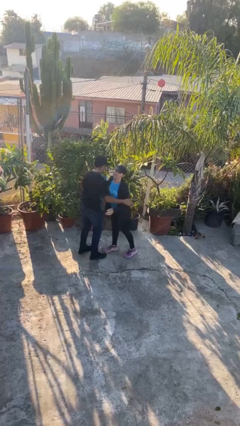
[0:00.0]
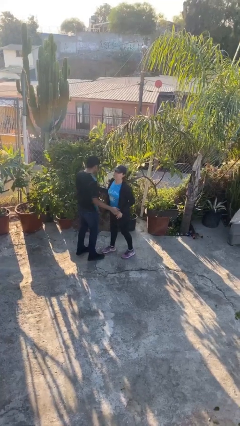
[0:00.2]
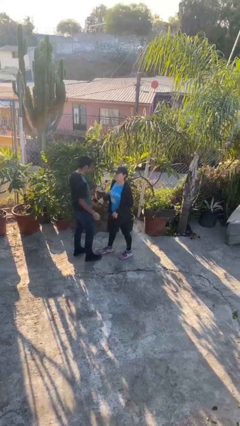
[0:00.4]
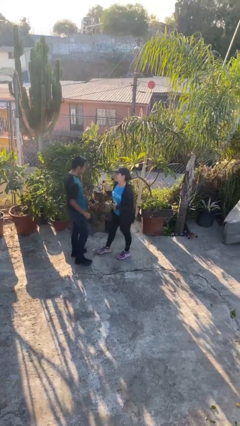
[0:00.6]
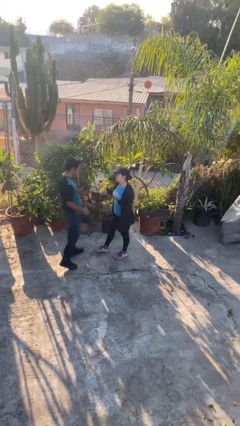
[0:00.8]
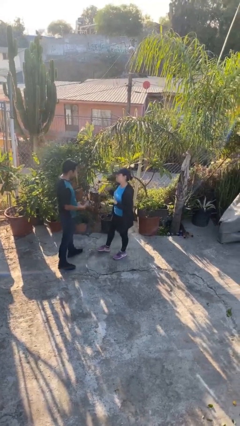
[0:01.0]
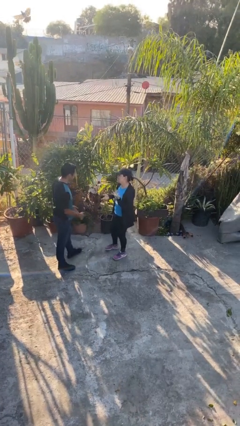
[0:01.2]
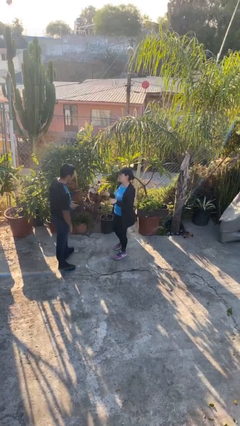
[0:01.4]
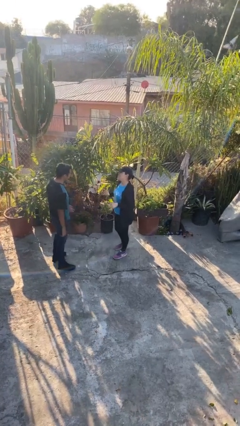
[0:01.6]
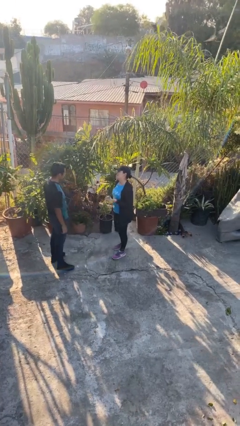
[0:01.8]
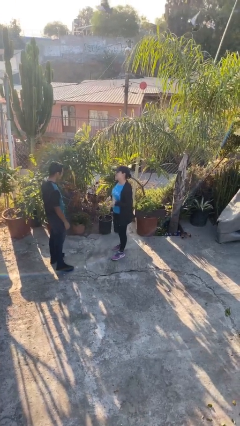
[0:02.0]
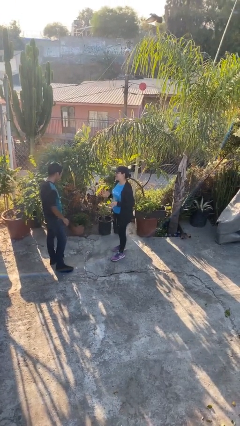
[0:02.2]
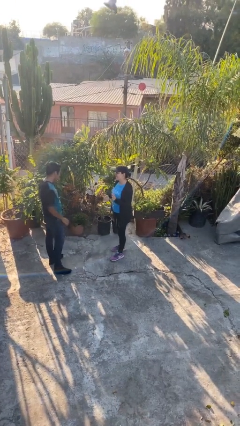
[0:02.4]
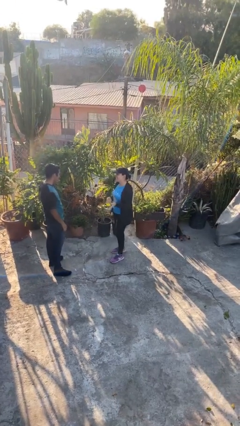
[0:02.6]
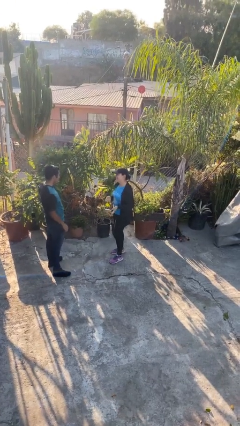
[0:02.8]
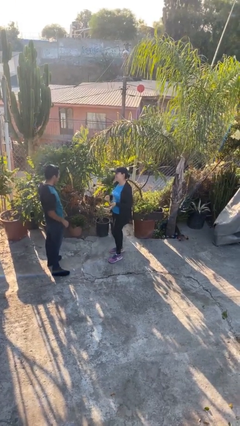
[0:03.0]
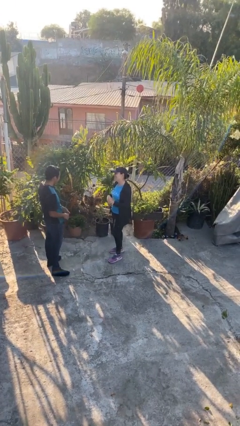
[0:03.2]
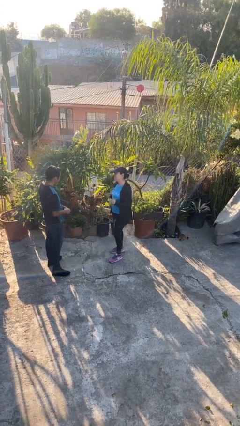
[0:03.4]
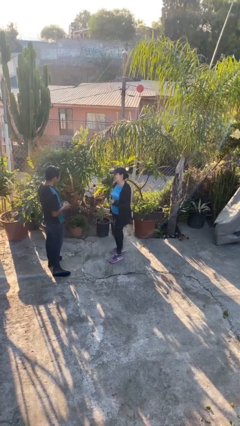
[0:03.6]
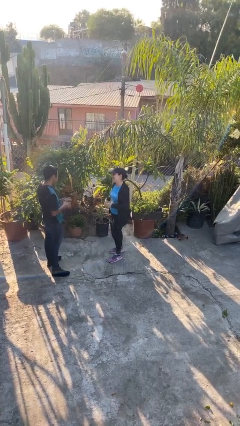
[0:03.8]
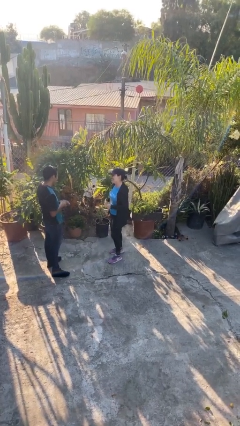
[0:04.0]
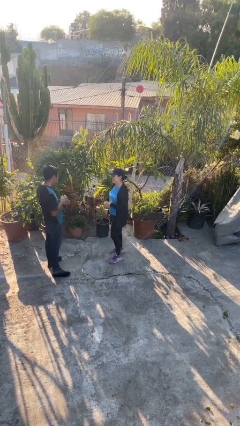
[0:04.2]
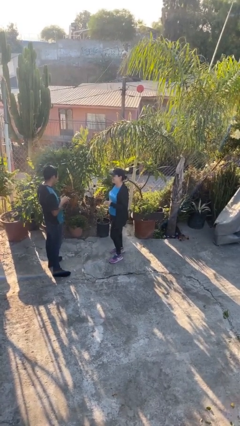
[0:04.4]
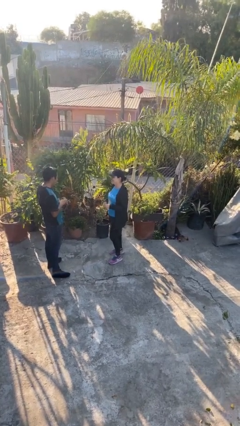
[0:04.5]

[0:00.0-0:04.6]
person talks to person

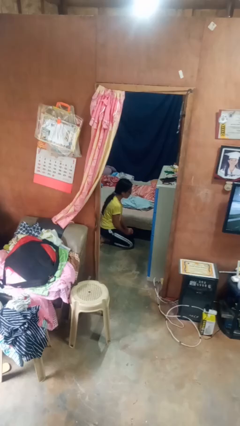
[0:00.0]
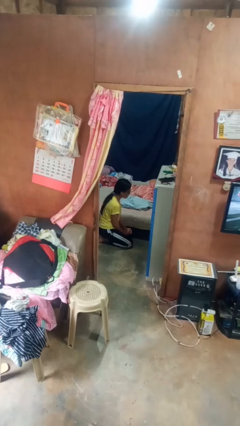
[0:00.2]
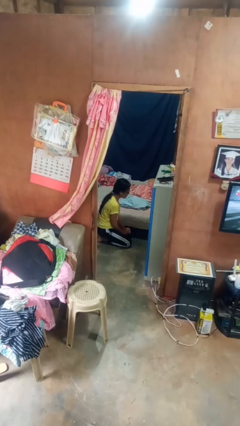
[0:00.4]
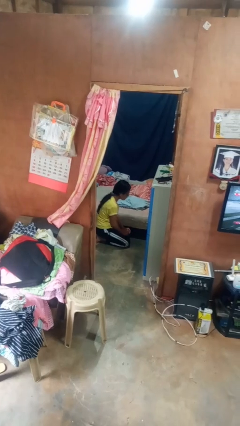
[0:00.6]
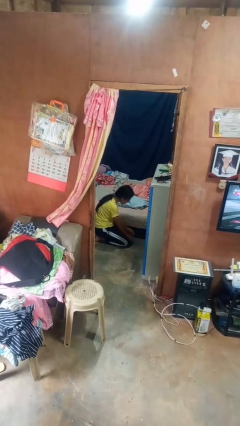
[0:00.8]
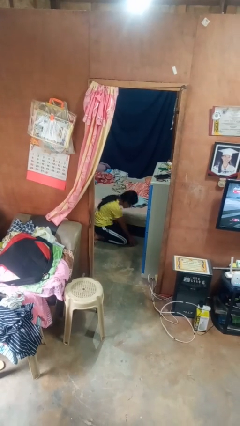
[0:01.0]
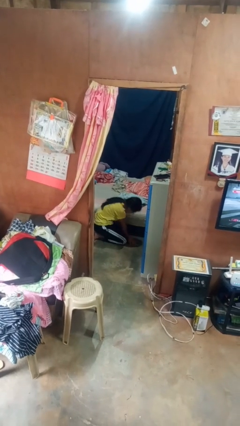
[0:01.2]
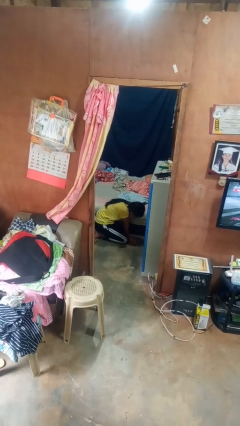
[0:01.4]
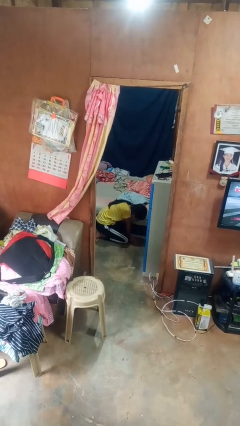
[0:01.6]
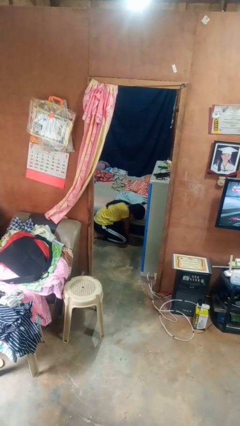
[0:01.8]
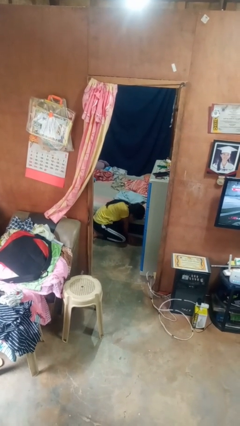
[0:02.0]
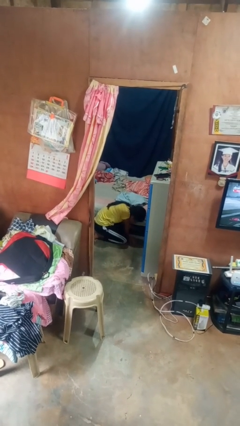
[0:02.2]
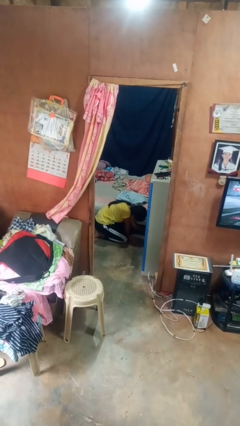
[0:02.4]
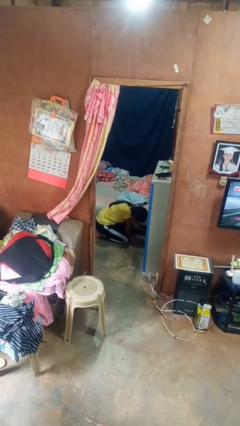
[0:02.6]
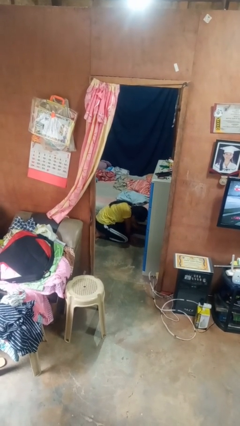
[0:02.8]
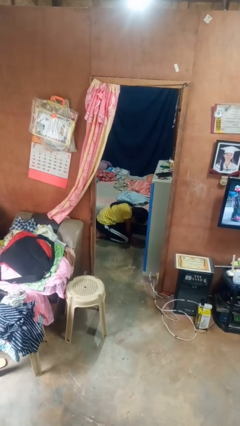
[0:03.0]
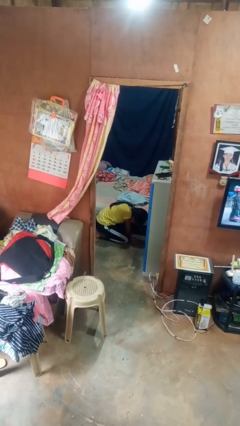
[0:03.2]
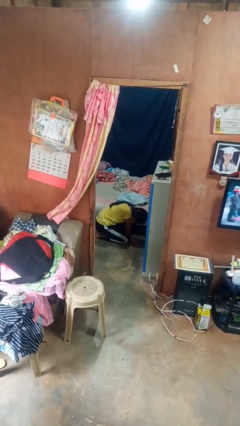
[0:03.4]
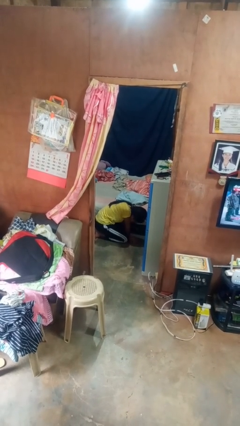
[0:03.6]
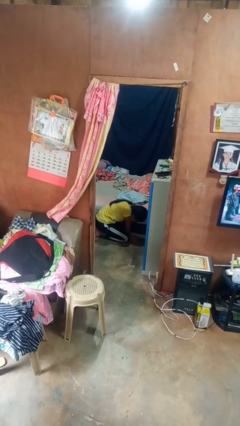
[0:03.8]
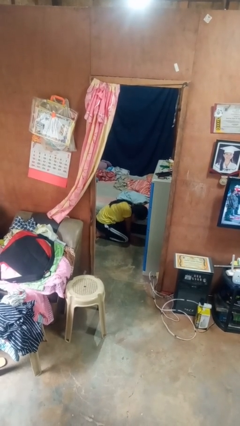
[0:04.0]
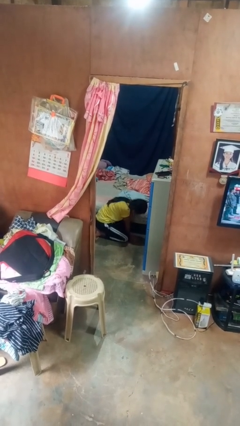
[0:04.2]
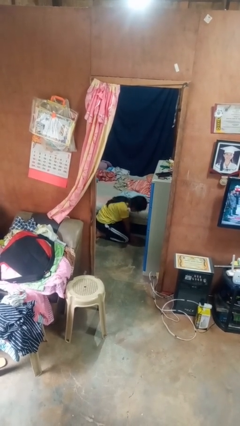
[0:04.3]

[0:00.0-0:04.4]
person searches under bed

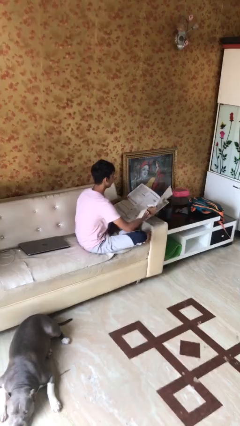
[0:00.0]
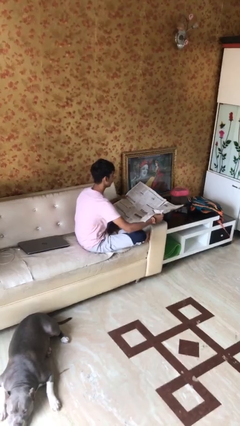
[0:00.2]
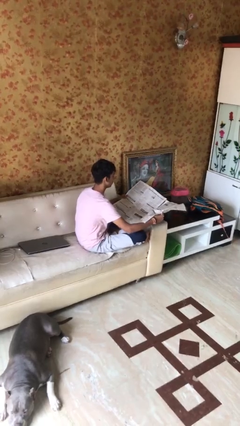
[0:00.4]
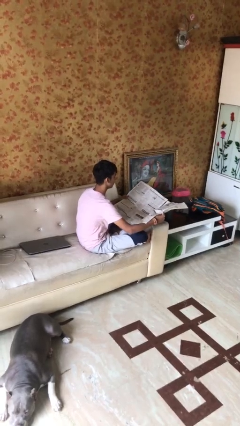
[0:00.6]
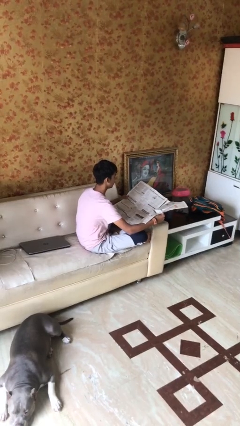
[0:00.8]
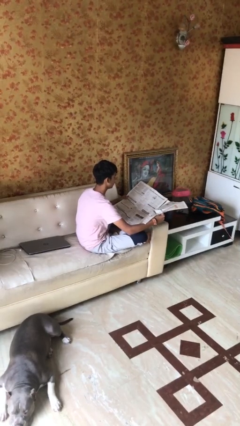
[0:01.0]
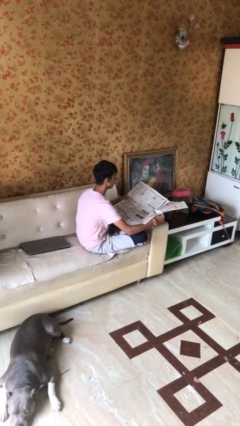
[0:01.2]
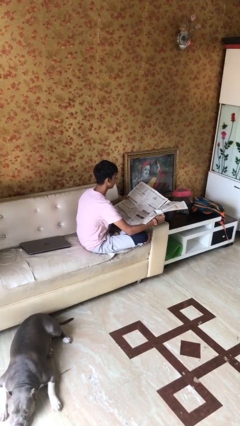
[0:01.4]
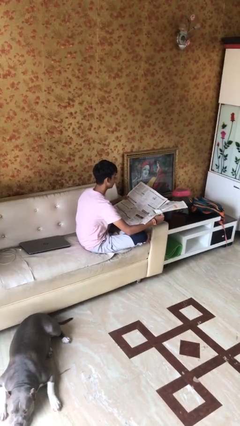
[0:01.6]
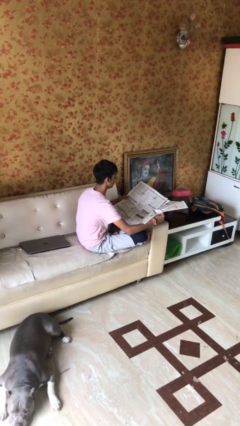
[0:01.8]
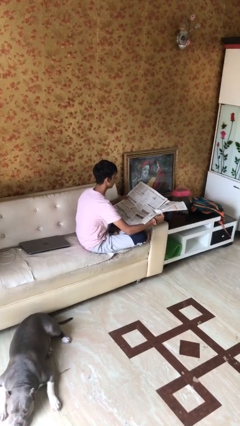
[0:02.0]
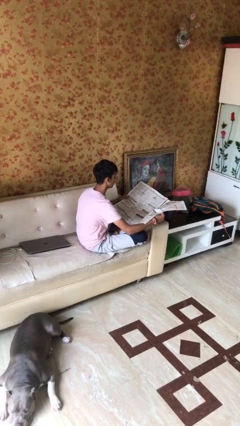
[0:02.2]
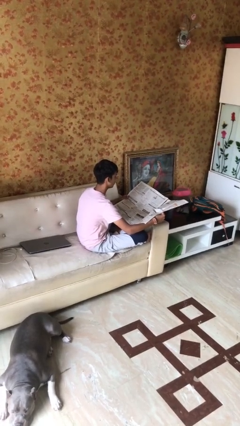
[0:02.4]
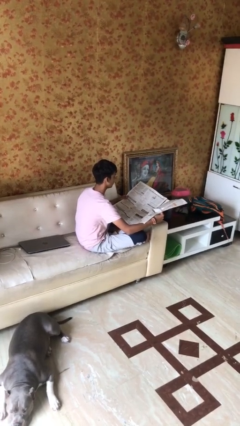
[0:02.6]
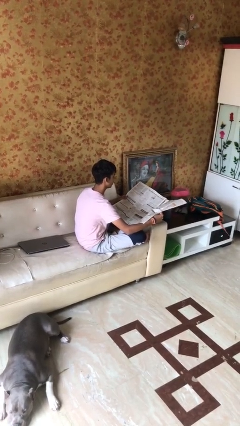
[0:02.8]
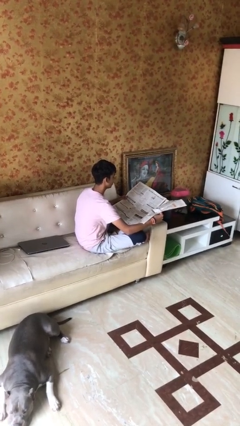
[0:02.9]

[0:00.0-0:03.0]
person reads newspaper

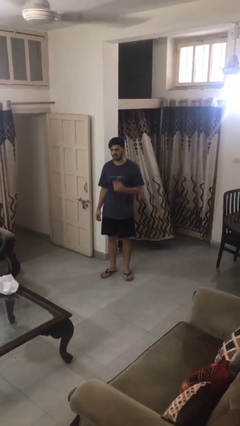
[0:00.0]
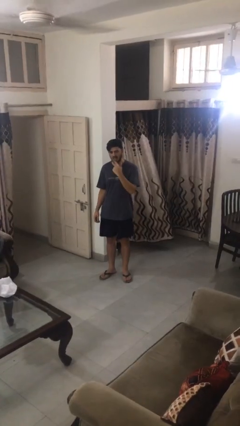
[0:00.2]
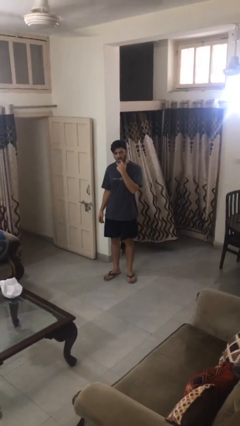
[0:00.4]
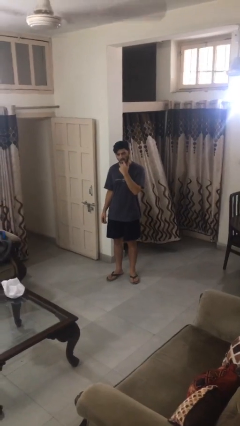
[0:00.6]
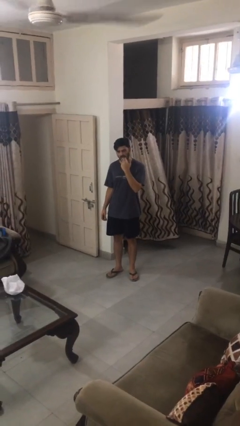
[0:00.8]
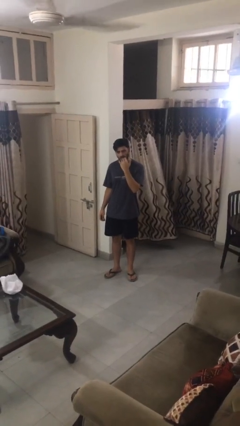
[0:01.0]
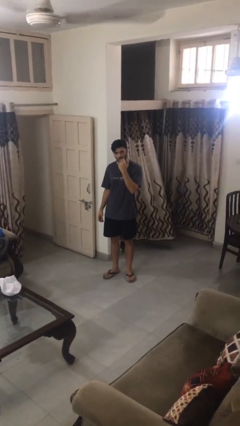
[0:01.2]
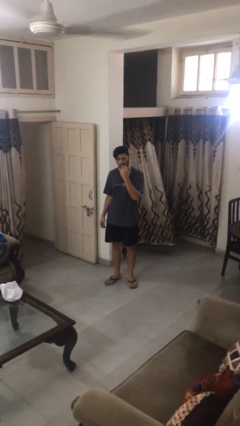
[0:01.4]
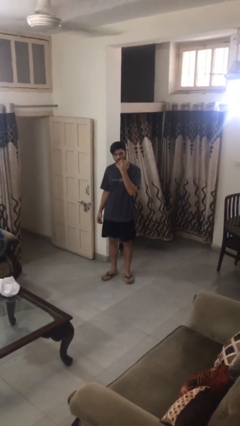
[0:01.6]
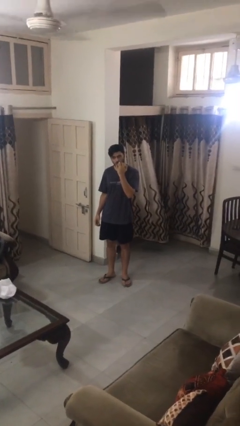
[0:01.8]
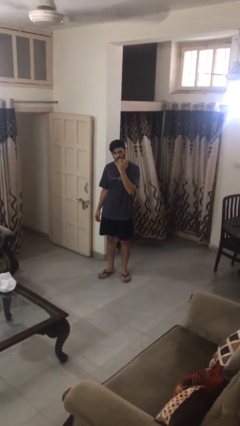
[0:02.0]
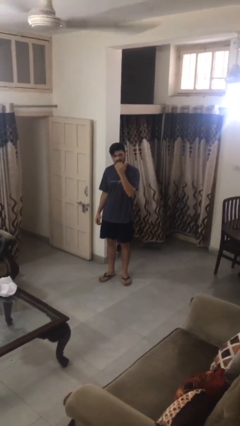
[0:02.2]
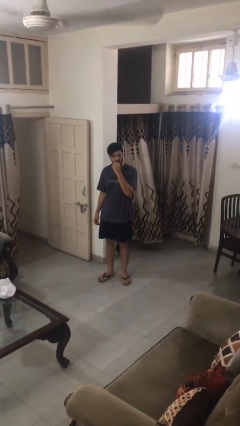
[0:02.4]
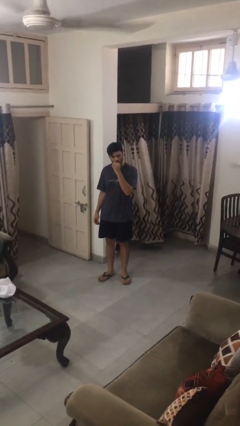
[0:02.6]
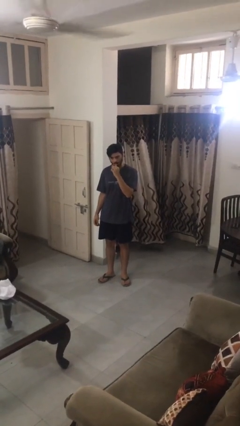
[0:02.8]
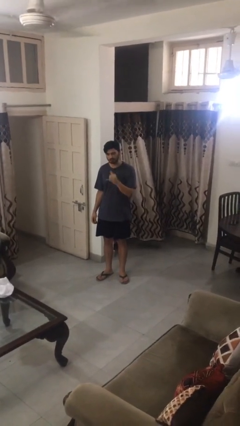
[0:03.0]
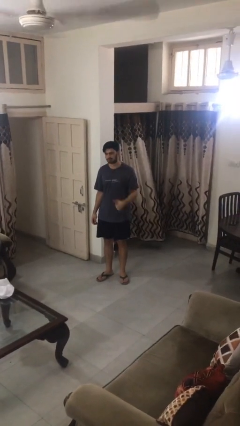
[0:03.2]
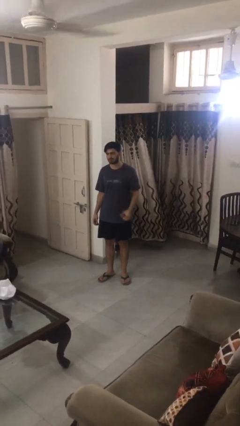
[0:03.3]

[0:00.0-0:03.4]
person licks fingers

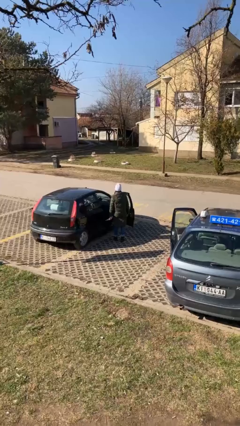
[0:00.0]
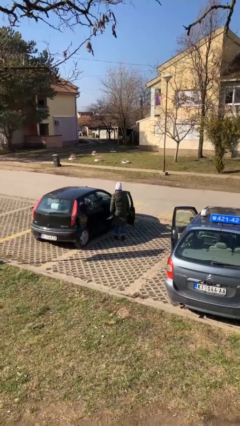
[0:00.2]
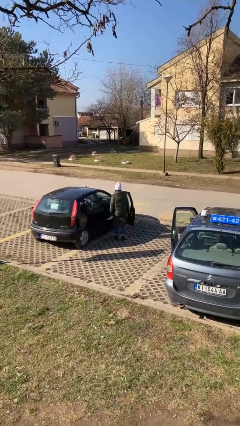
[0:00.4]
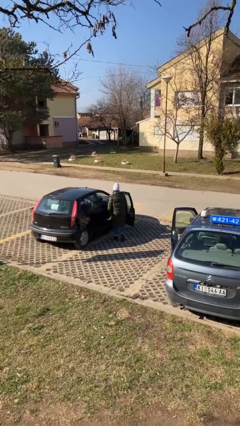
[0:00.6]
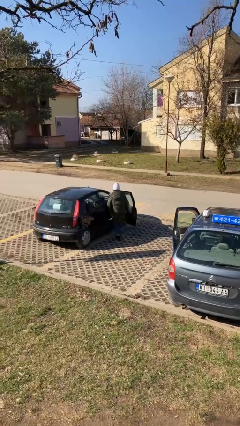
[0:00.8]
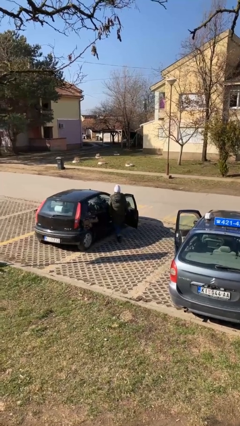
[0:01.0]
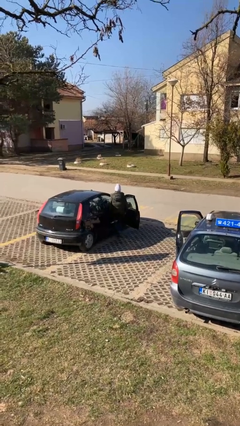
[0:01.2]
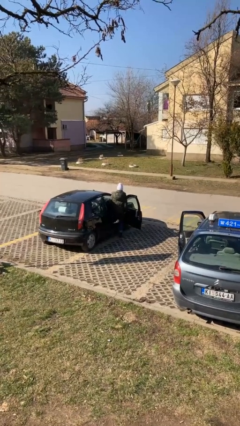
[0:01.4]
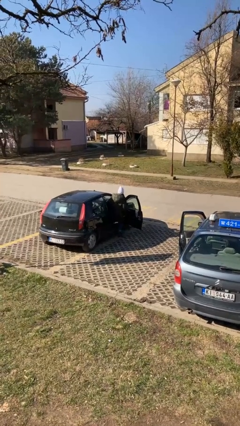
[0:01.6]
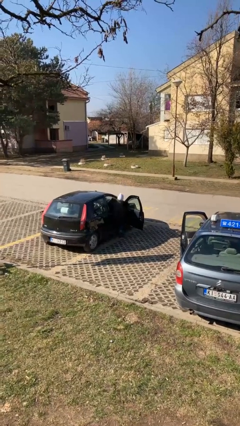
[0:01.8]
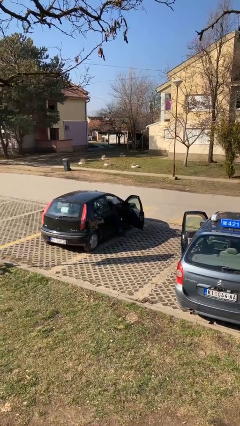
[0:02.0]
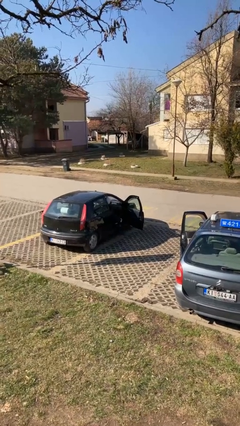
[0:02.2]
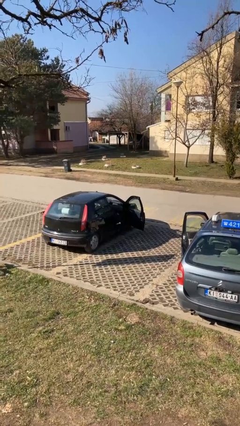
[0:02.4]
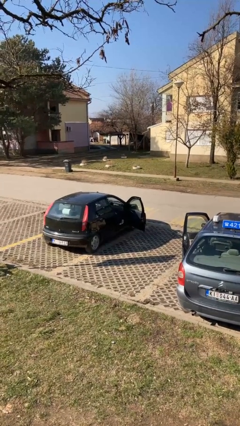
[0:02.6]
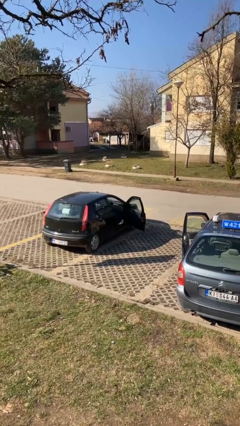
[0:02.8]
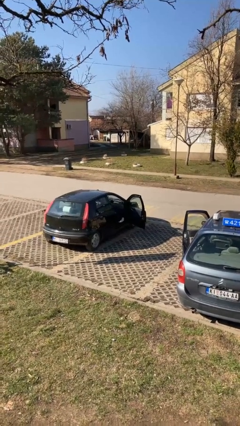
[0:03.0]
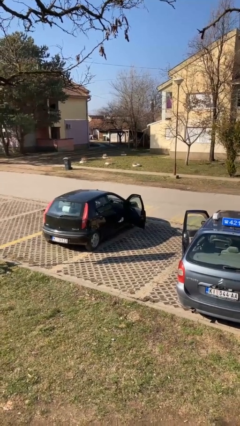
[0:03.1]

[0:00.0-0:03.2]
person enters car
